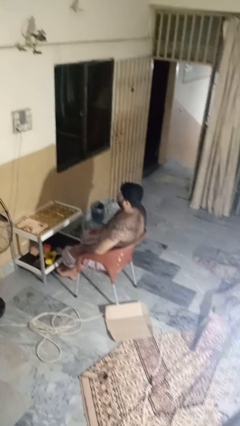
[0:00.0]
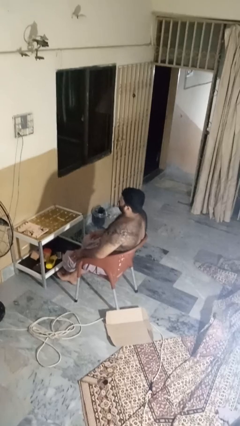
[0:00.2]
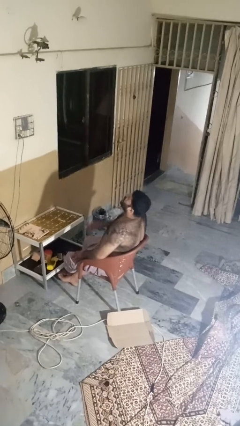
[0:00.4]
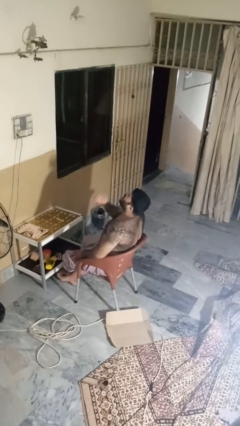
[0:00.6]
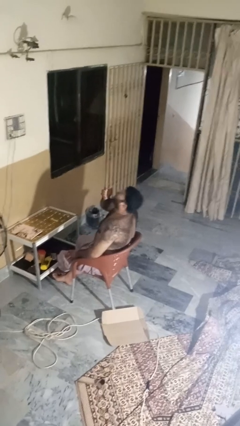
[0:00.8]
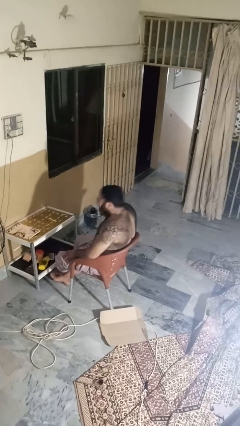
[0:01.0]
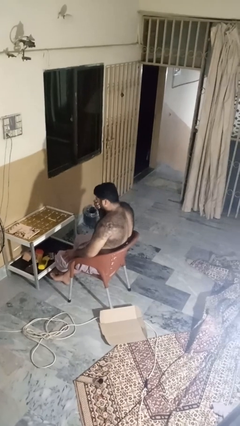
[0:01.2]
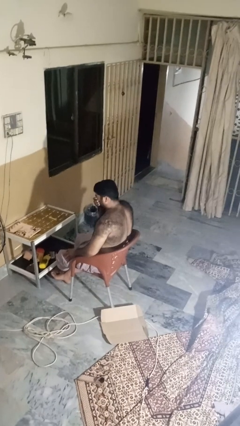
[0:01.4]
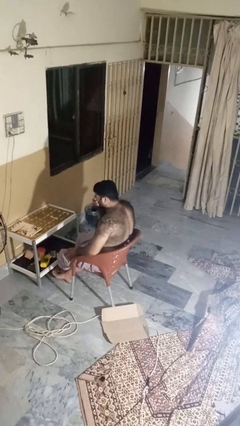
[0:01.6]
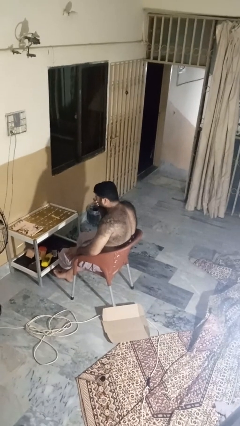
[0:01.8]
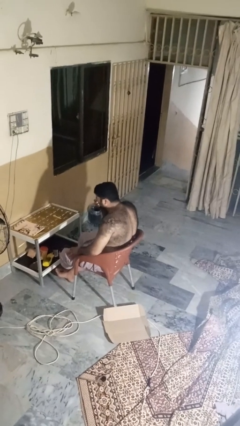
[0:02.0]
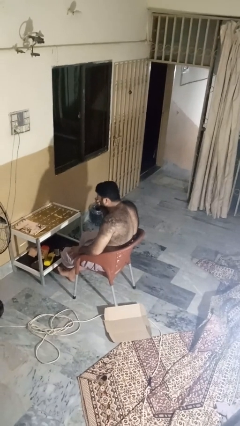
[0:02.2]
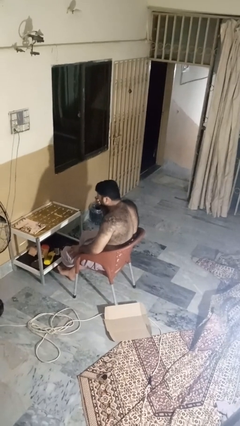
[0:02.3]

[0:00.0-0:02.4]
person sneezes into hand

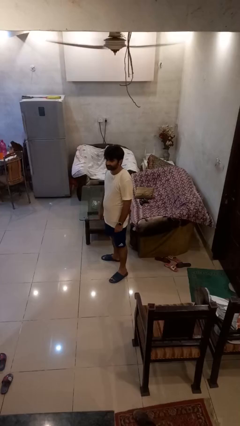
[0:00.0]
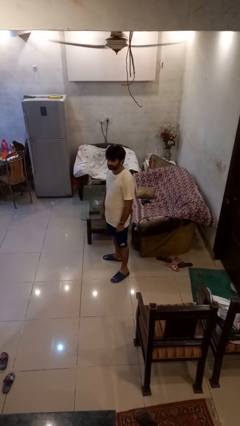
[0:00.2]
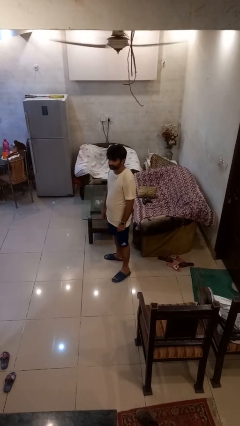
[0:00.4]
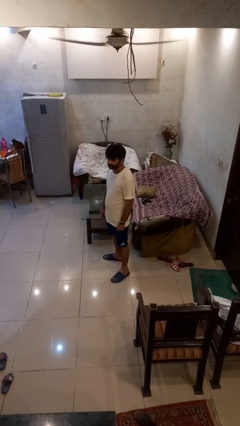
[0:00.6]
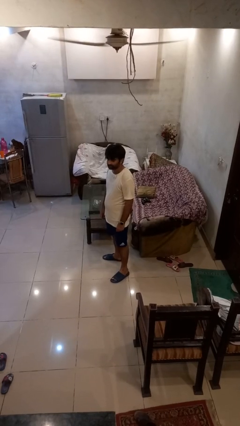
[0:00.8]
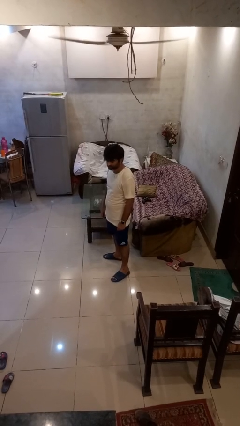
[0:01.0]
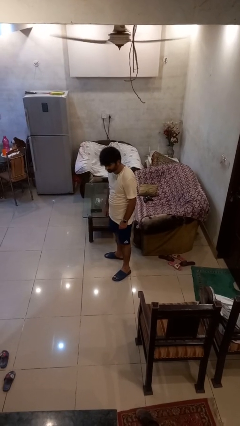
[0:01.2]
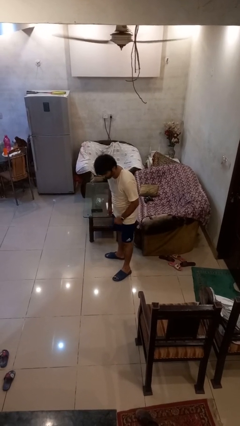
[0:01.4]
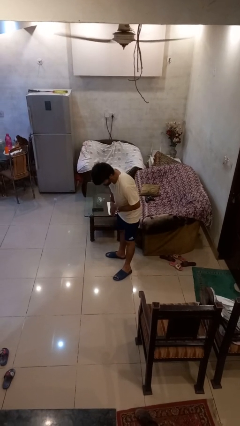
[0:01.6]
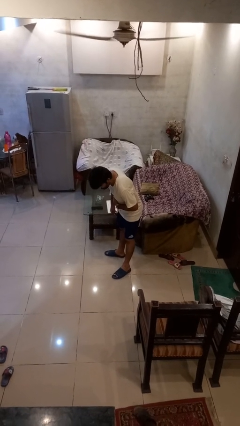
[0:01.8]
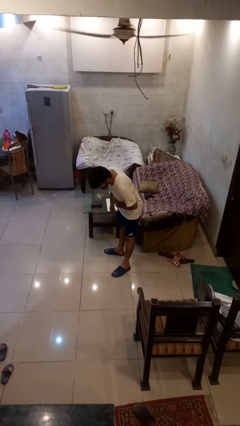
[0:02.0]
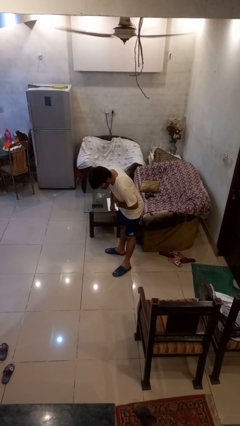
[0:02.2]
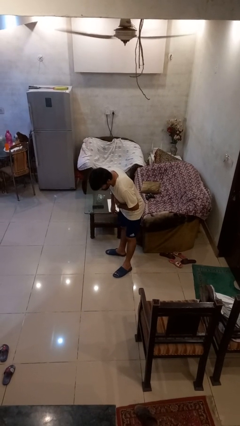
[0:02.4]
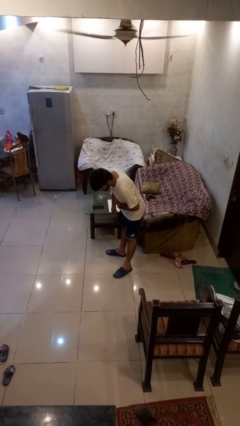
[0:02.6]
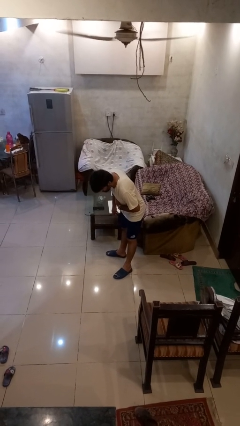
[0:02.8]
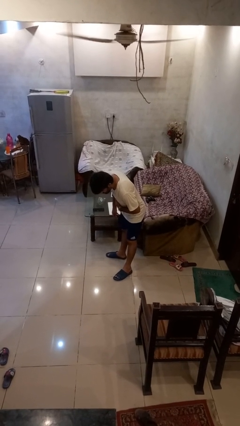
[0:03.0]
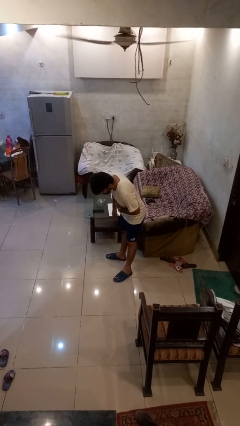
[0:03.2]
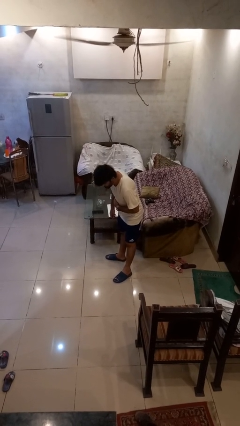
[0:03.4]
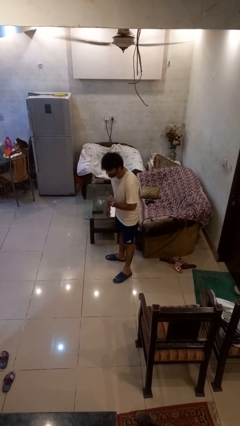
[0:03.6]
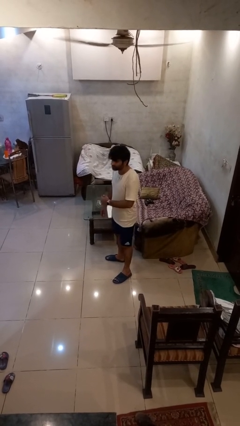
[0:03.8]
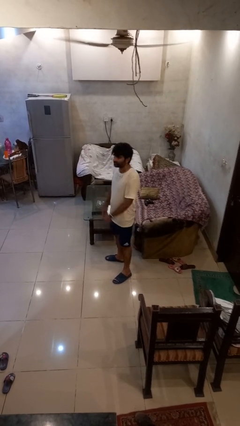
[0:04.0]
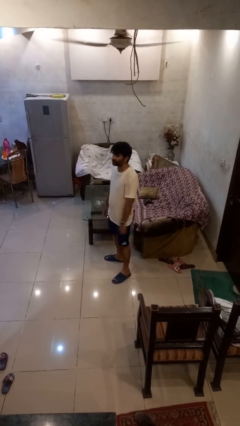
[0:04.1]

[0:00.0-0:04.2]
person bows

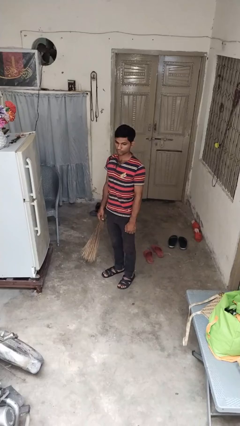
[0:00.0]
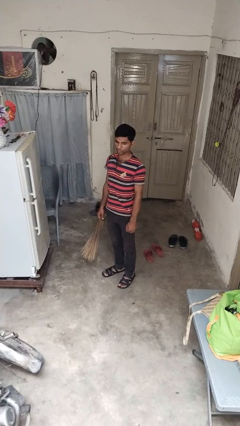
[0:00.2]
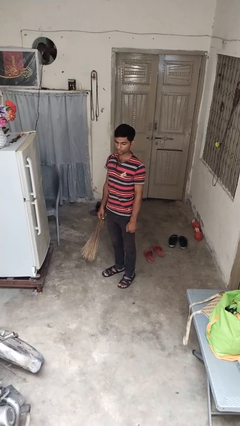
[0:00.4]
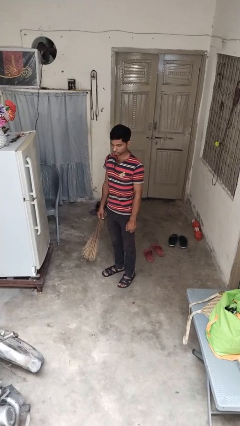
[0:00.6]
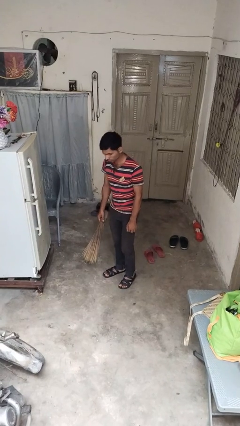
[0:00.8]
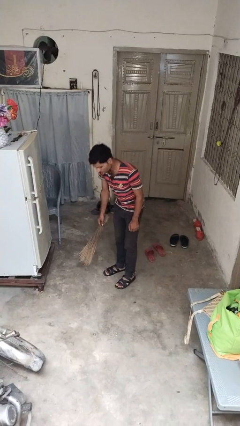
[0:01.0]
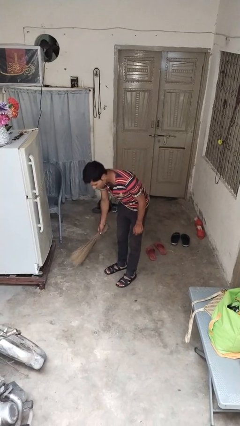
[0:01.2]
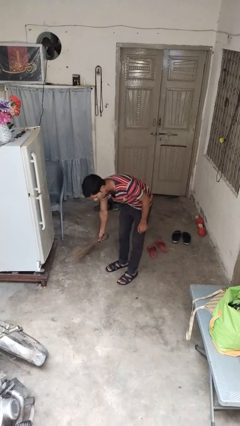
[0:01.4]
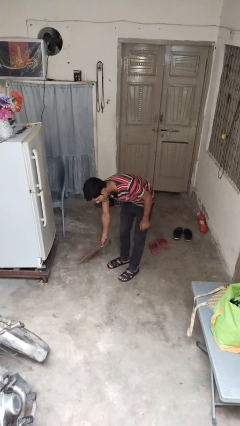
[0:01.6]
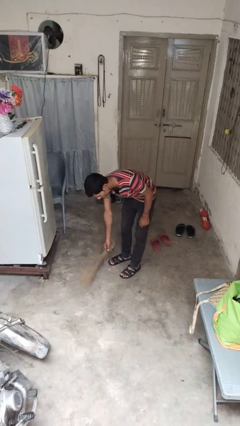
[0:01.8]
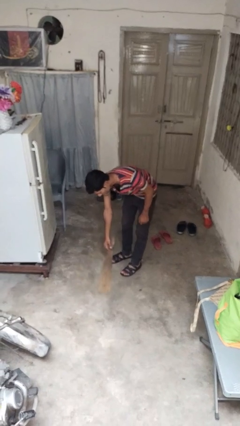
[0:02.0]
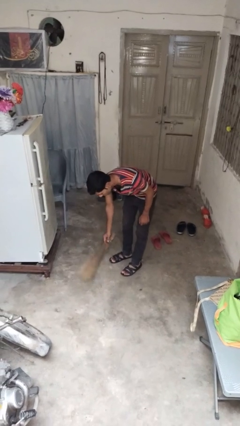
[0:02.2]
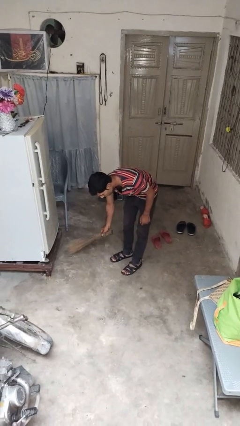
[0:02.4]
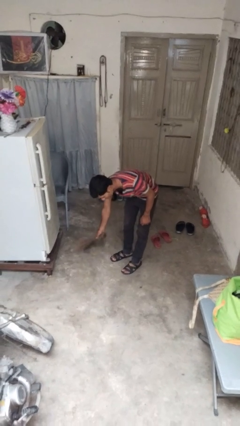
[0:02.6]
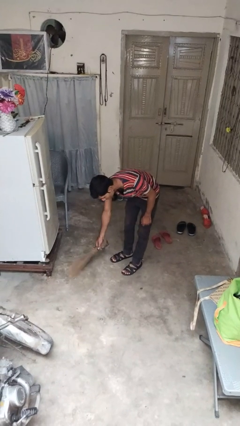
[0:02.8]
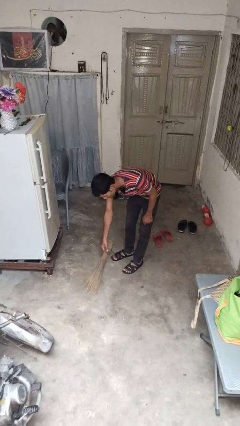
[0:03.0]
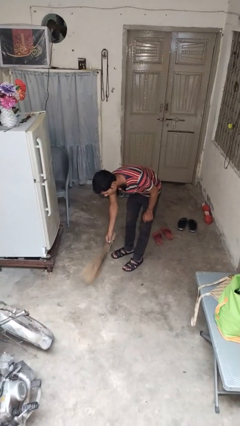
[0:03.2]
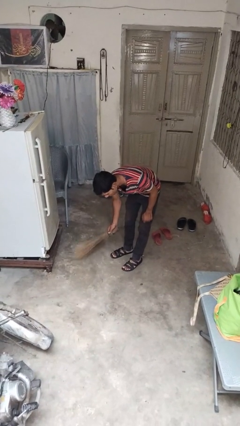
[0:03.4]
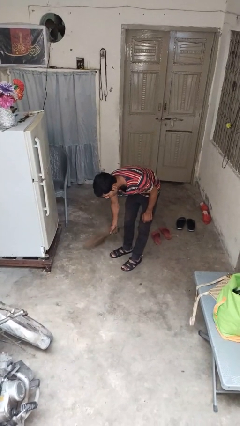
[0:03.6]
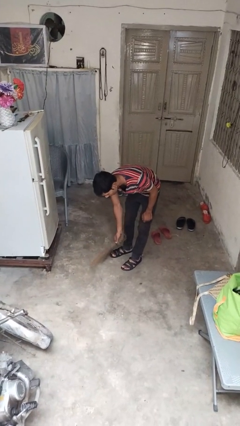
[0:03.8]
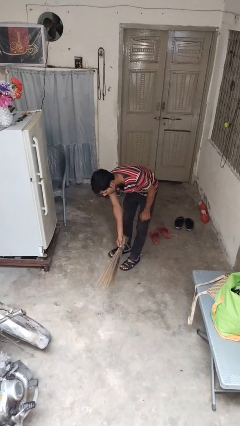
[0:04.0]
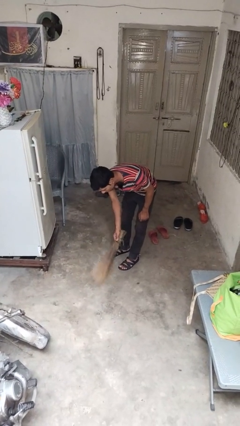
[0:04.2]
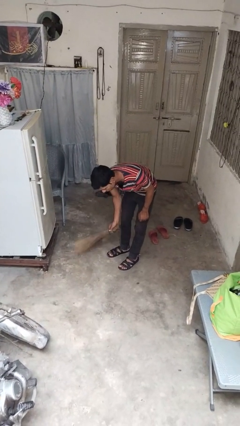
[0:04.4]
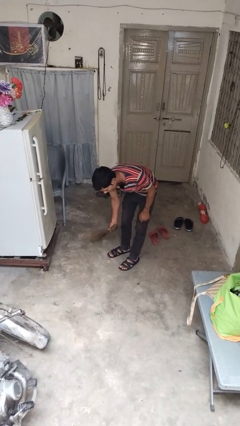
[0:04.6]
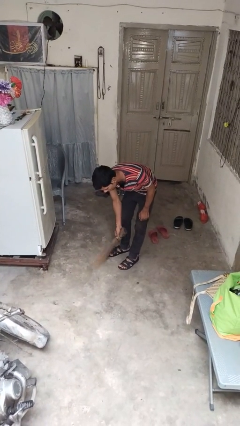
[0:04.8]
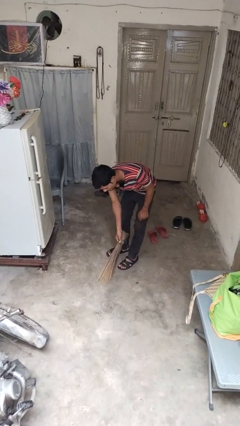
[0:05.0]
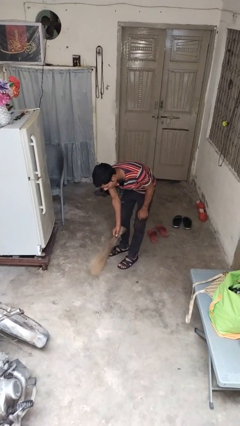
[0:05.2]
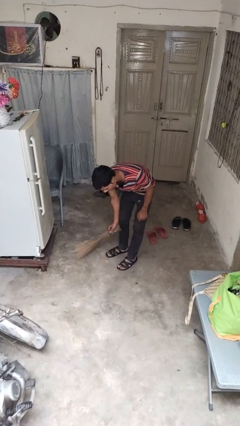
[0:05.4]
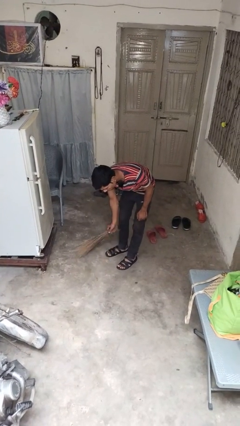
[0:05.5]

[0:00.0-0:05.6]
person sweeps floor

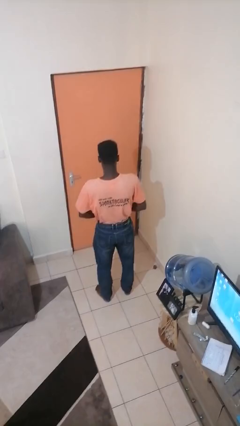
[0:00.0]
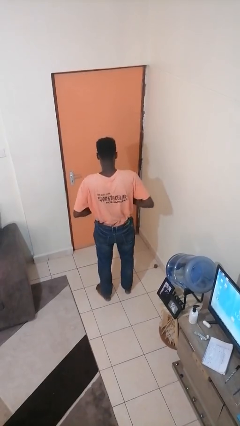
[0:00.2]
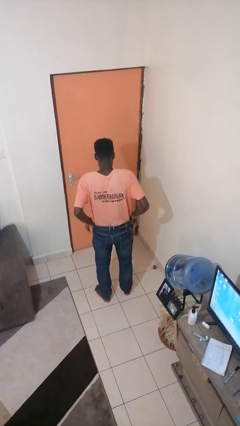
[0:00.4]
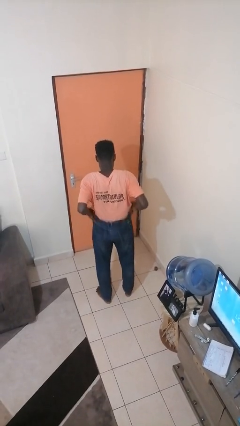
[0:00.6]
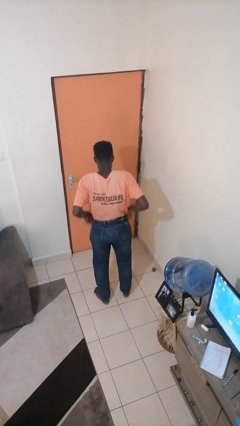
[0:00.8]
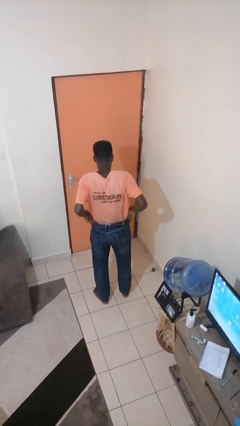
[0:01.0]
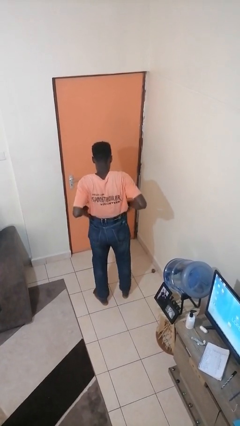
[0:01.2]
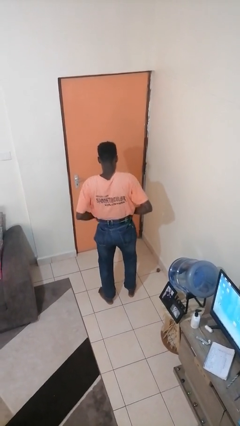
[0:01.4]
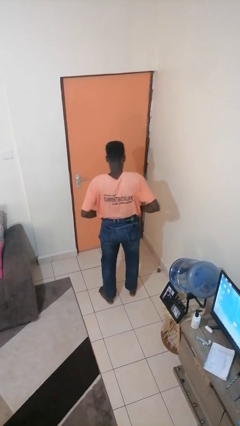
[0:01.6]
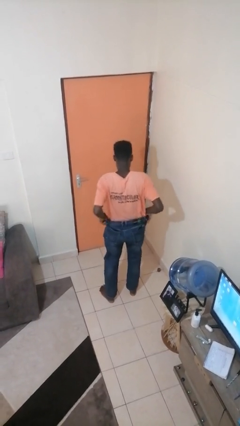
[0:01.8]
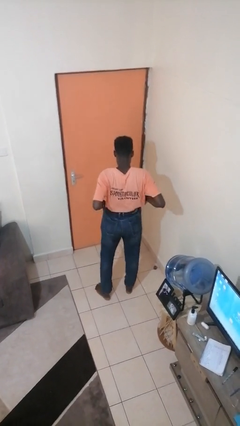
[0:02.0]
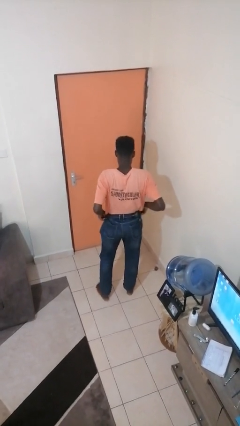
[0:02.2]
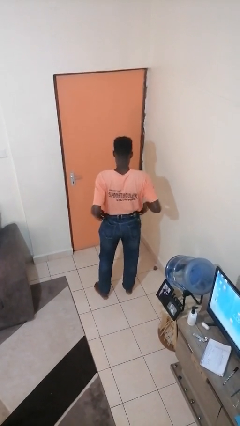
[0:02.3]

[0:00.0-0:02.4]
person hikes up pants

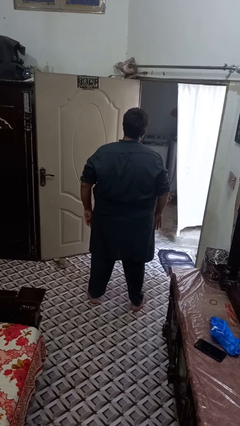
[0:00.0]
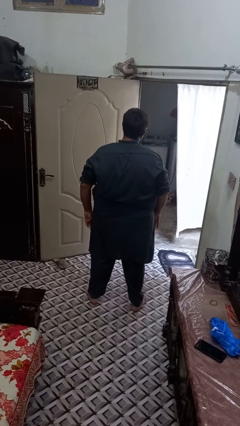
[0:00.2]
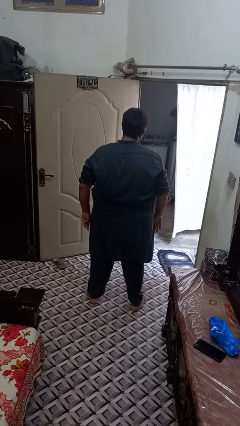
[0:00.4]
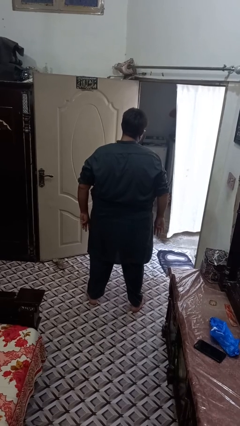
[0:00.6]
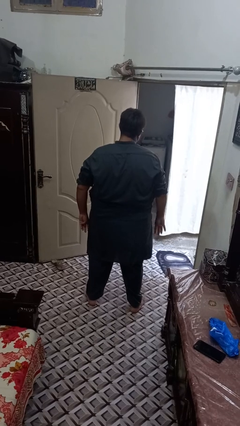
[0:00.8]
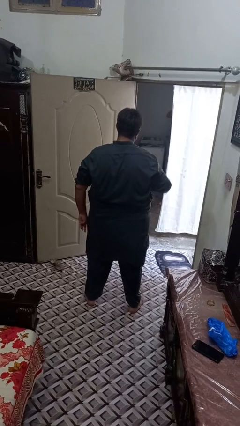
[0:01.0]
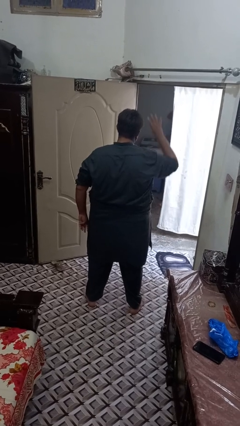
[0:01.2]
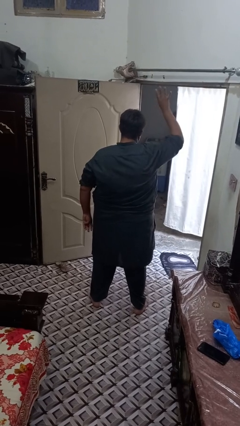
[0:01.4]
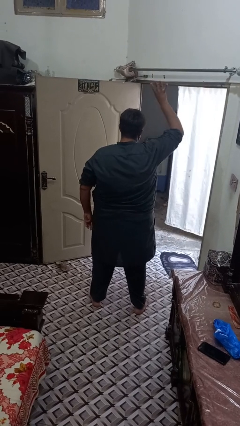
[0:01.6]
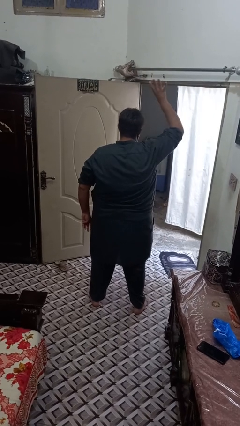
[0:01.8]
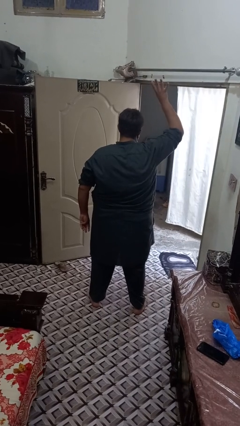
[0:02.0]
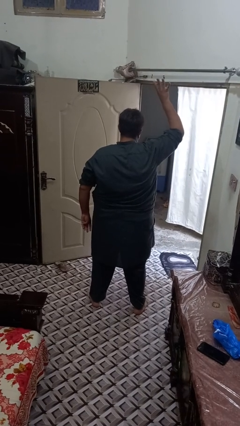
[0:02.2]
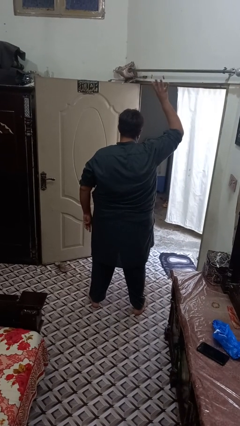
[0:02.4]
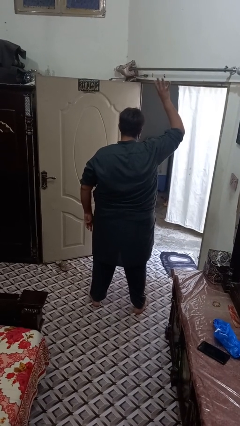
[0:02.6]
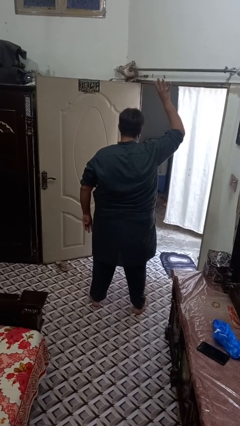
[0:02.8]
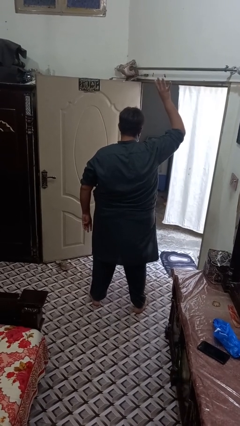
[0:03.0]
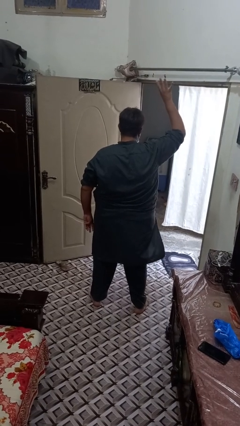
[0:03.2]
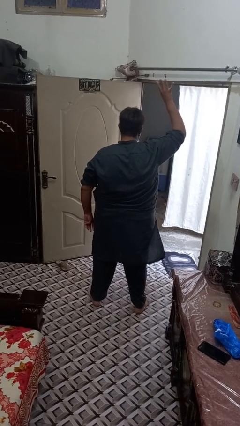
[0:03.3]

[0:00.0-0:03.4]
person gestures number four
